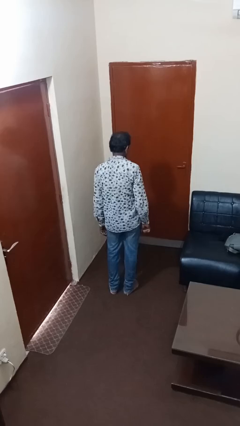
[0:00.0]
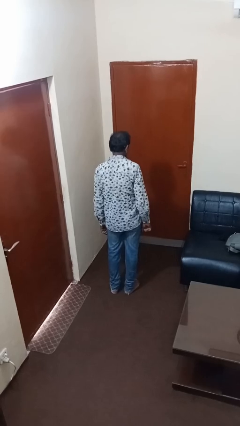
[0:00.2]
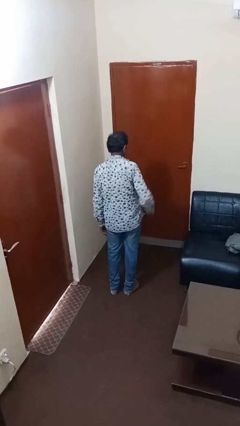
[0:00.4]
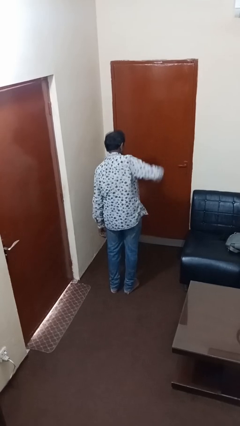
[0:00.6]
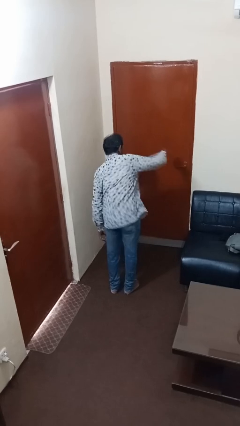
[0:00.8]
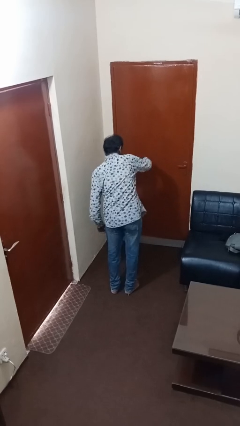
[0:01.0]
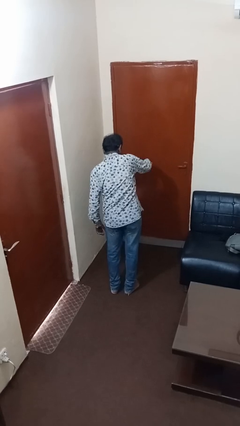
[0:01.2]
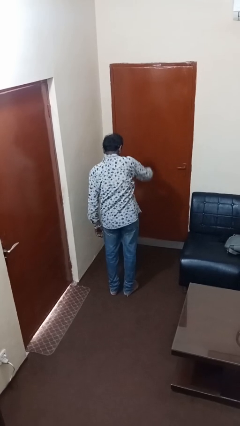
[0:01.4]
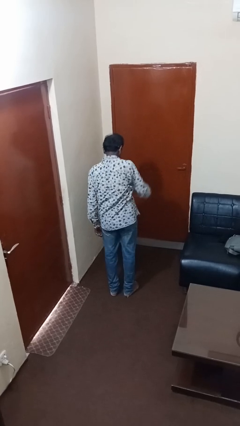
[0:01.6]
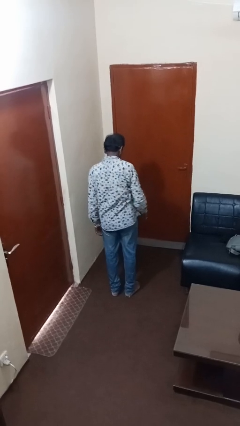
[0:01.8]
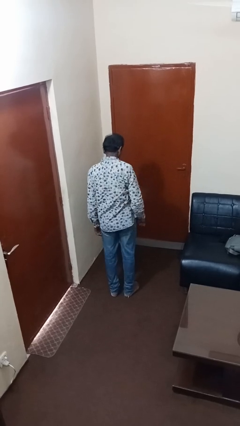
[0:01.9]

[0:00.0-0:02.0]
person karate chop

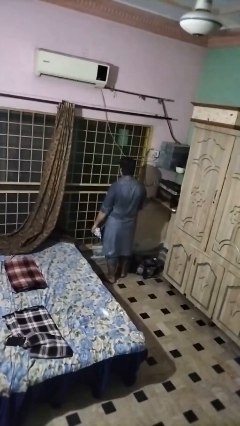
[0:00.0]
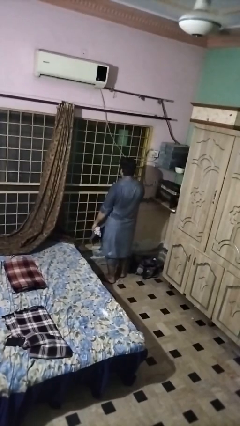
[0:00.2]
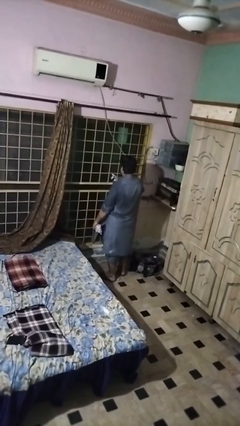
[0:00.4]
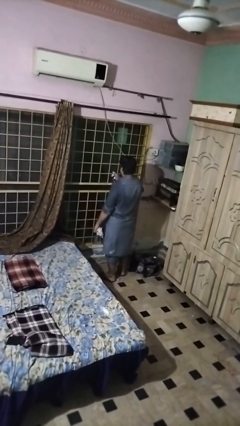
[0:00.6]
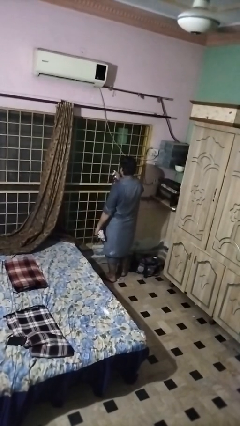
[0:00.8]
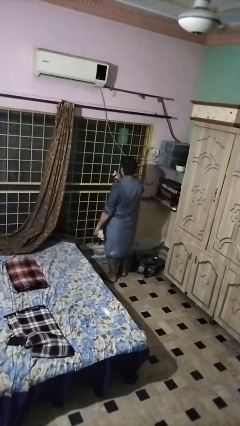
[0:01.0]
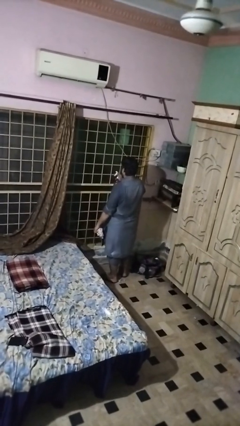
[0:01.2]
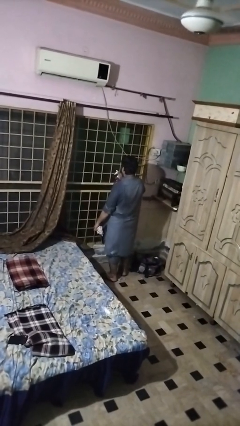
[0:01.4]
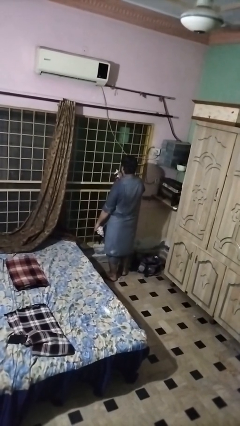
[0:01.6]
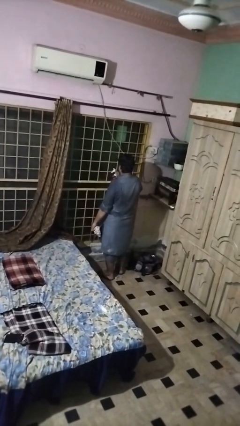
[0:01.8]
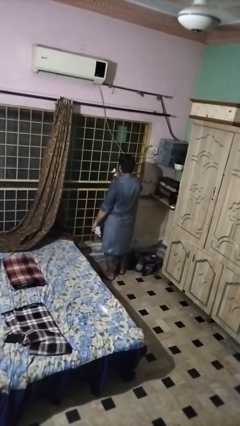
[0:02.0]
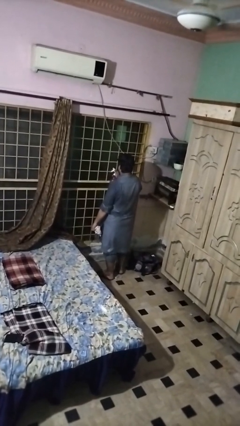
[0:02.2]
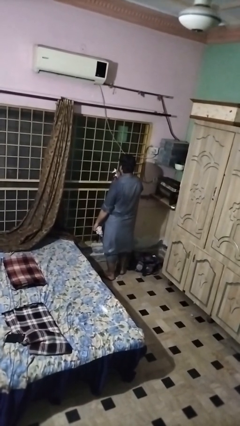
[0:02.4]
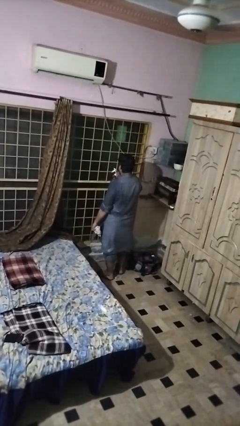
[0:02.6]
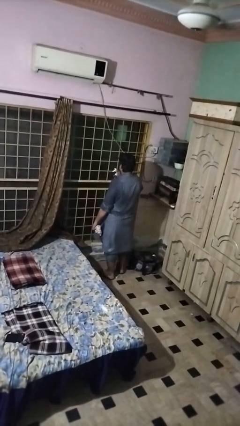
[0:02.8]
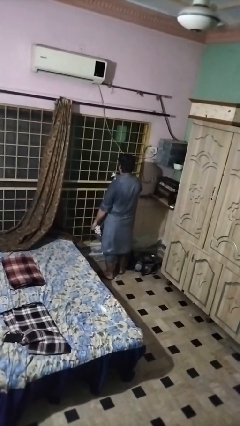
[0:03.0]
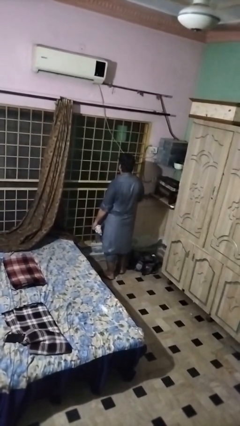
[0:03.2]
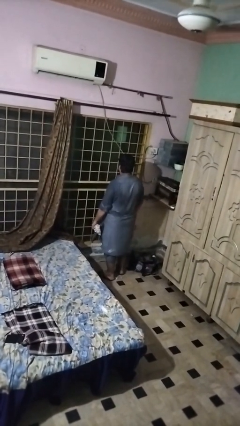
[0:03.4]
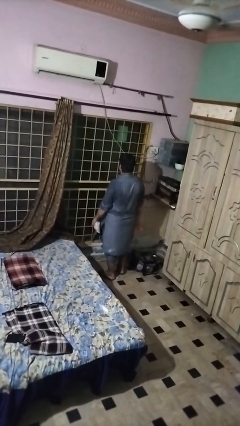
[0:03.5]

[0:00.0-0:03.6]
person sprays from bottle

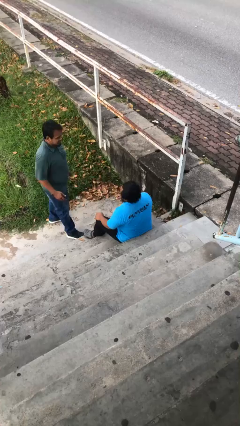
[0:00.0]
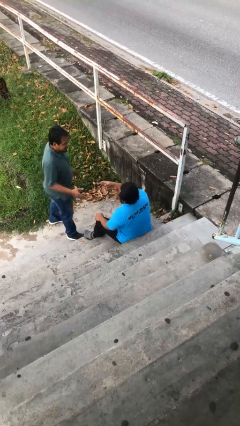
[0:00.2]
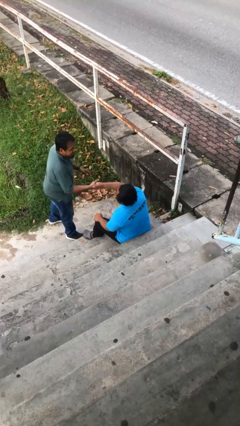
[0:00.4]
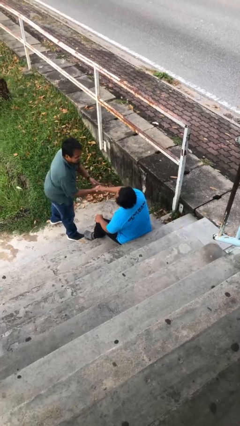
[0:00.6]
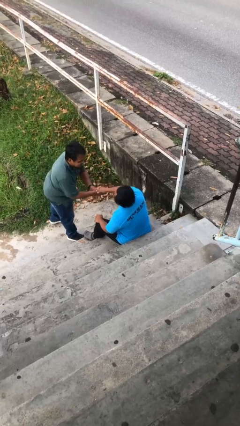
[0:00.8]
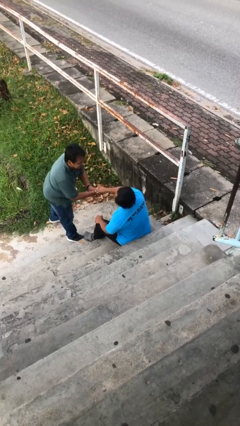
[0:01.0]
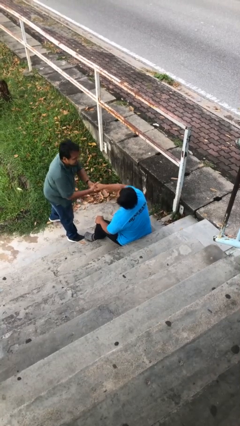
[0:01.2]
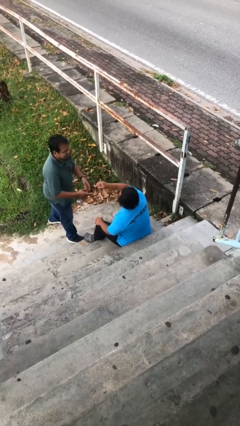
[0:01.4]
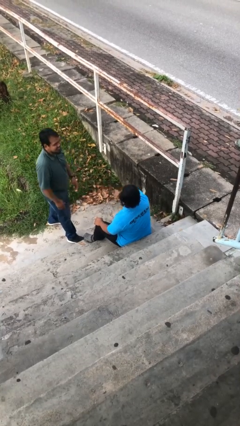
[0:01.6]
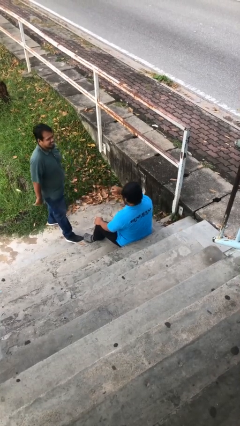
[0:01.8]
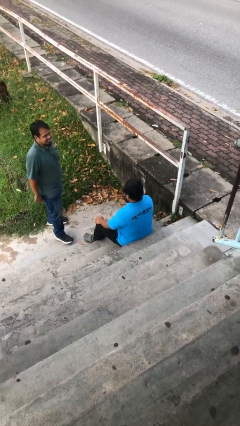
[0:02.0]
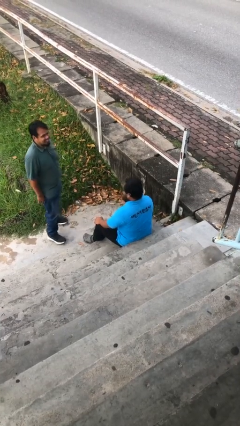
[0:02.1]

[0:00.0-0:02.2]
person shakes hand

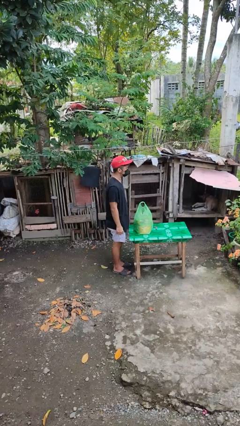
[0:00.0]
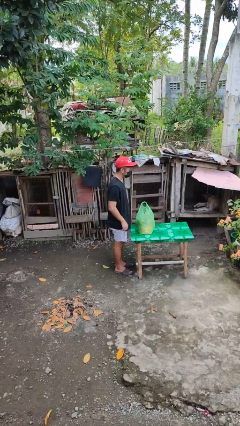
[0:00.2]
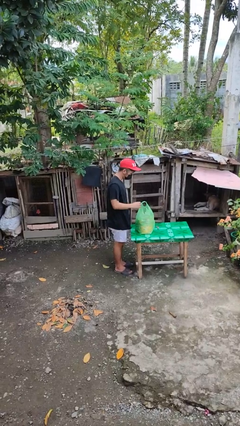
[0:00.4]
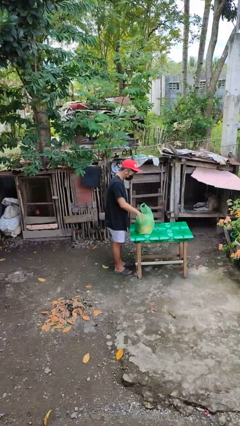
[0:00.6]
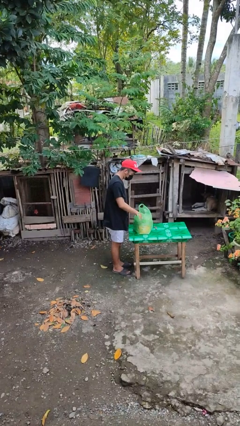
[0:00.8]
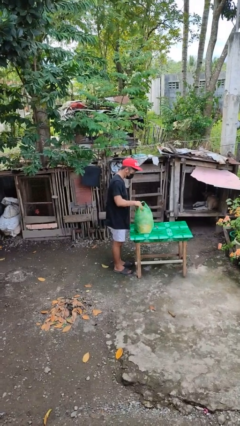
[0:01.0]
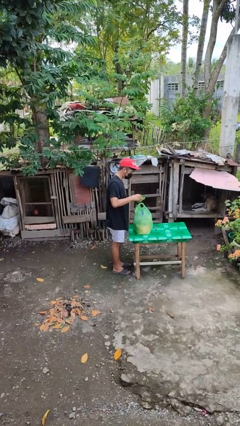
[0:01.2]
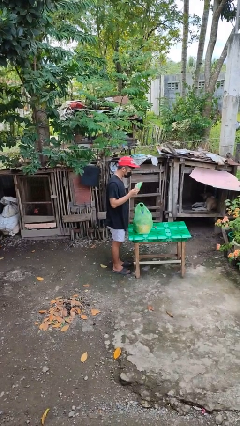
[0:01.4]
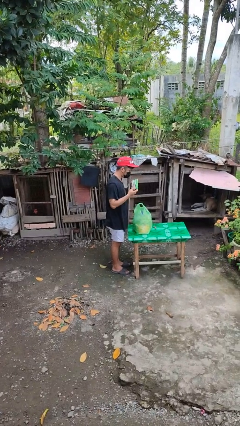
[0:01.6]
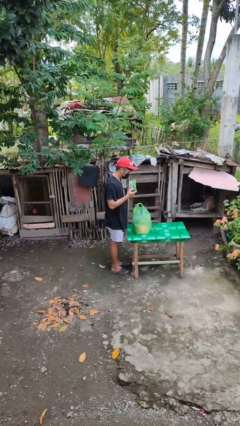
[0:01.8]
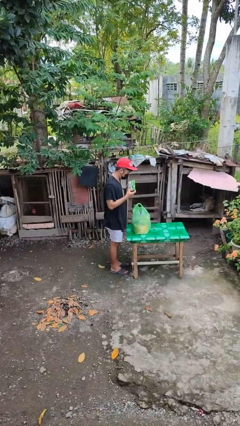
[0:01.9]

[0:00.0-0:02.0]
person takes object from bag

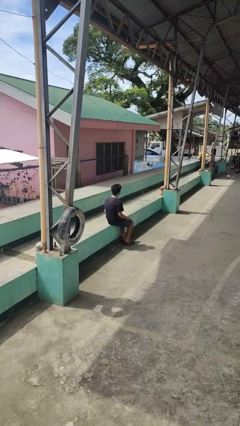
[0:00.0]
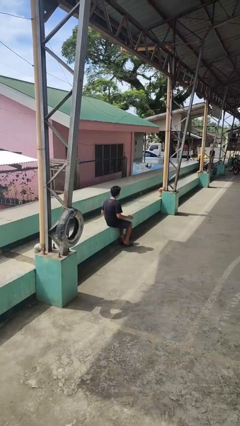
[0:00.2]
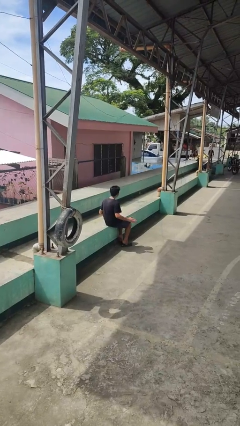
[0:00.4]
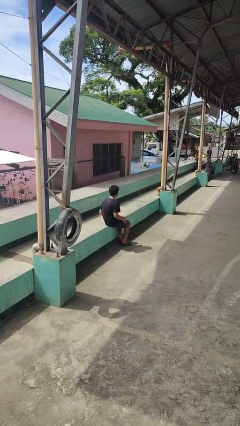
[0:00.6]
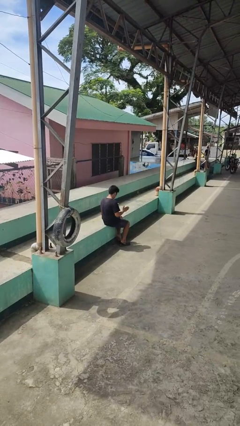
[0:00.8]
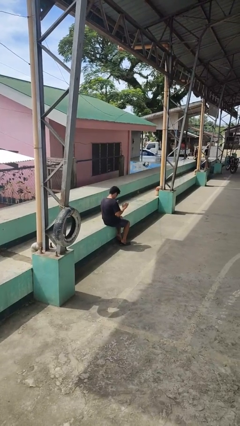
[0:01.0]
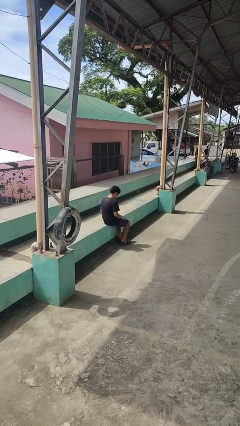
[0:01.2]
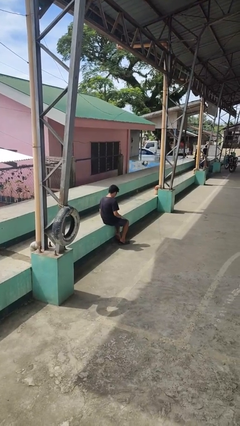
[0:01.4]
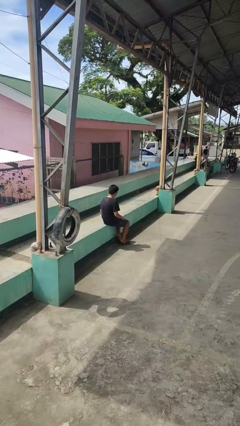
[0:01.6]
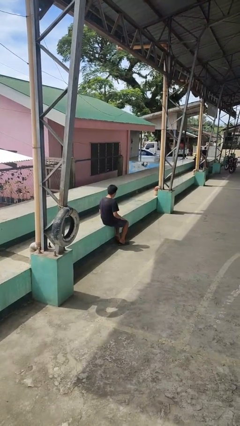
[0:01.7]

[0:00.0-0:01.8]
person slaps hands on thighs

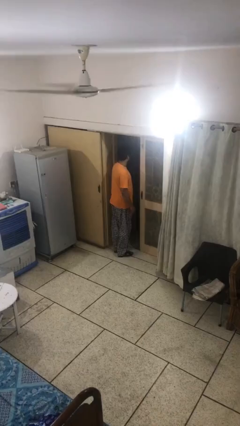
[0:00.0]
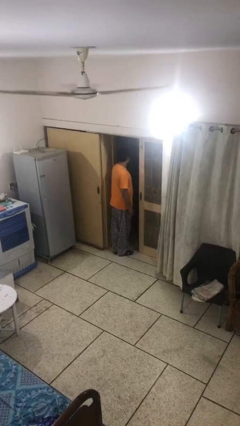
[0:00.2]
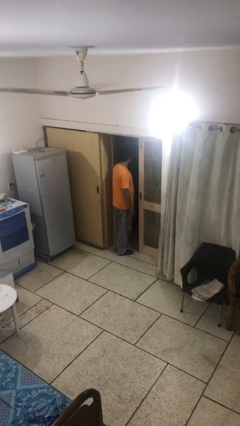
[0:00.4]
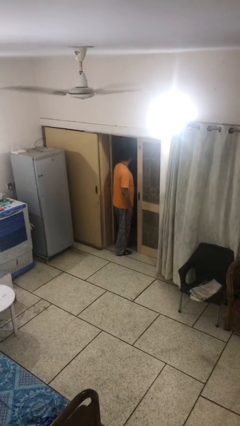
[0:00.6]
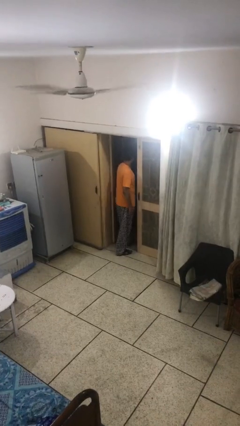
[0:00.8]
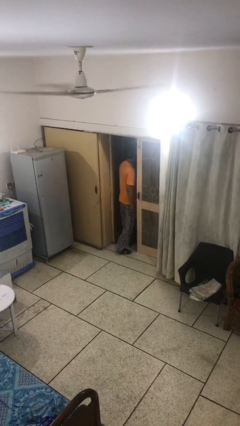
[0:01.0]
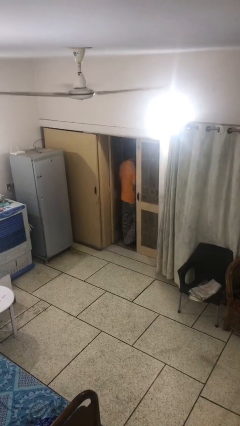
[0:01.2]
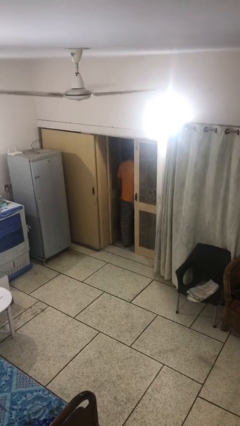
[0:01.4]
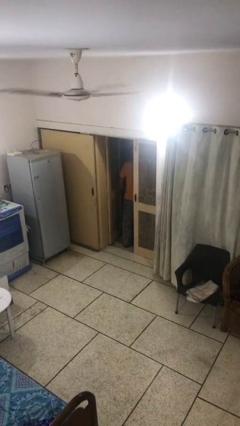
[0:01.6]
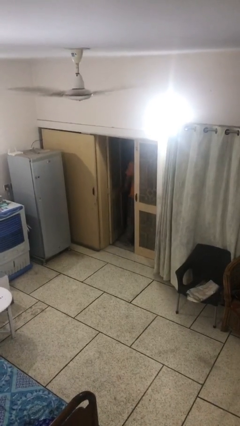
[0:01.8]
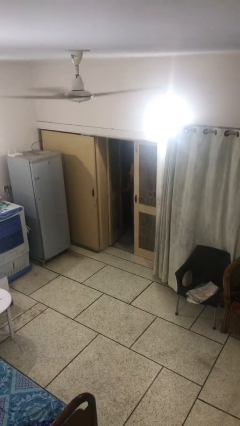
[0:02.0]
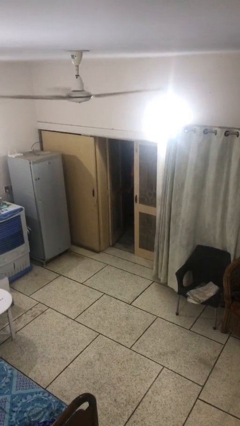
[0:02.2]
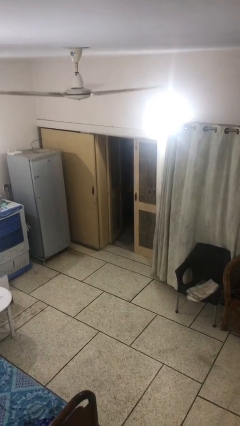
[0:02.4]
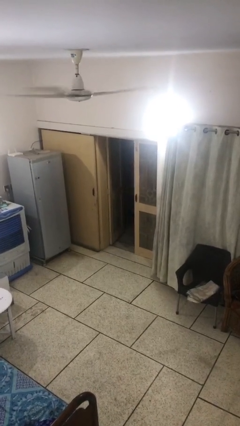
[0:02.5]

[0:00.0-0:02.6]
person exits scene through structure

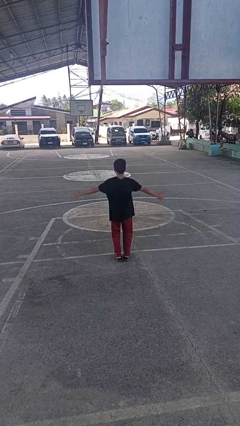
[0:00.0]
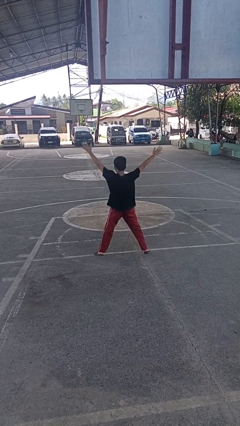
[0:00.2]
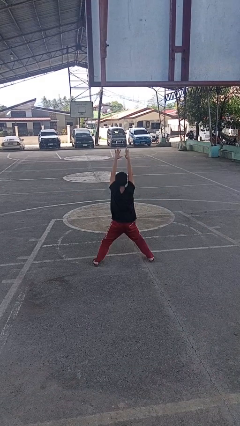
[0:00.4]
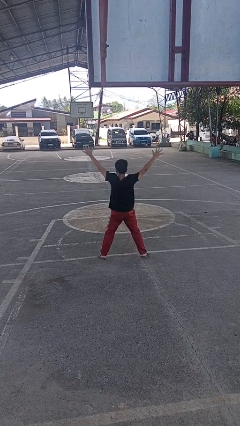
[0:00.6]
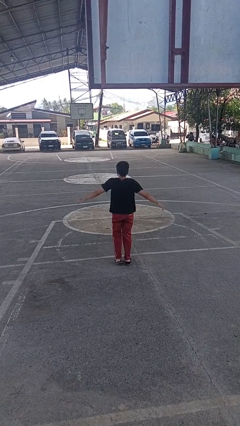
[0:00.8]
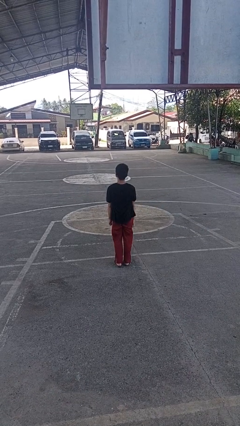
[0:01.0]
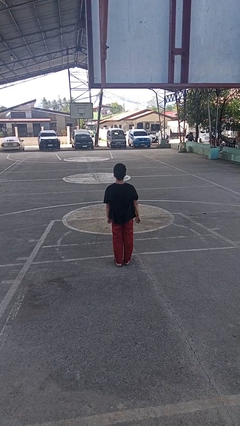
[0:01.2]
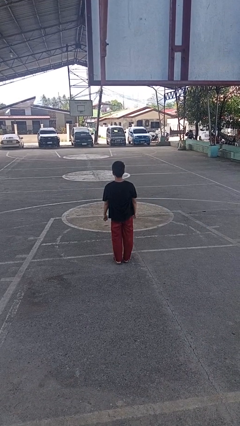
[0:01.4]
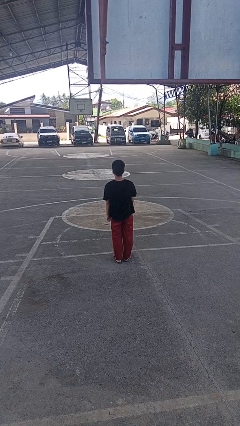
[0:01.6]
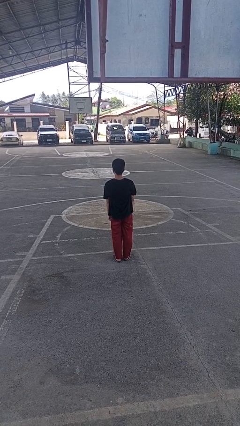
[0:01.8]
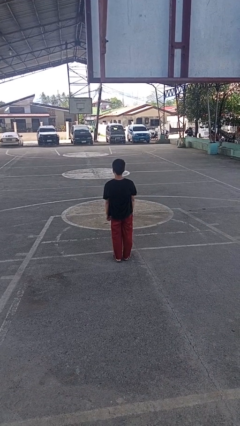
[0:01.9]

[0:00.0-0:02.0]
person exercises with jumping jacks

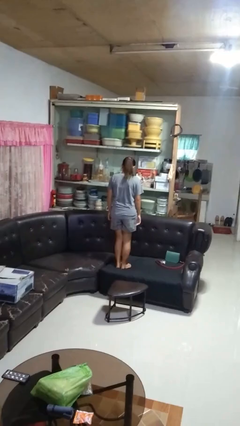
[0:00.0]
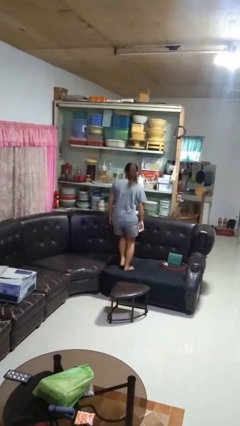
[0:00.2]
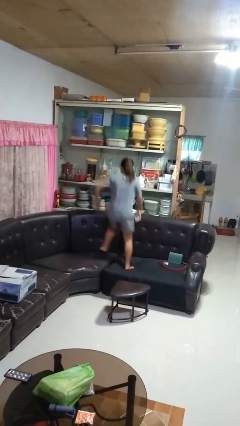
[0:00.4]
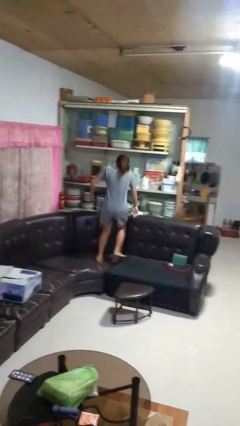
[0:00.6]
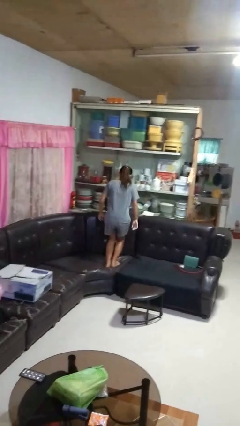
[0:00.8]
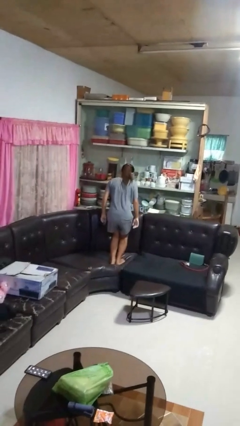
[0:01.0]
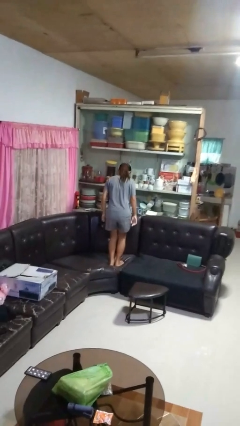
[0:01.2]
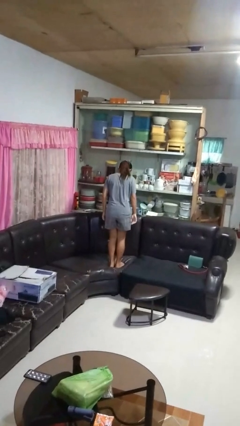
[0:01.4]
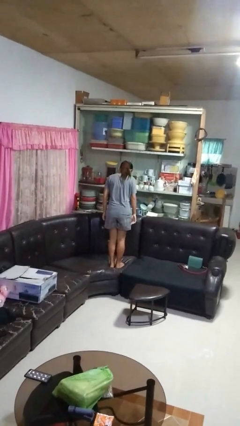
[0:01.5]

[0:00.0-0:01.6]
person jumps on couch
